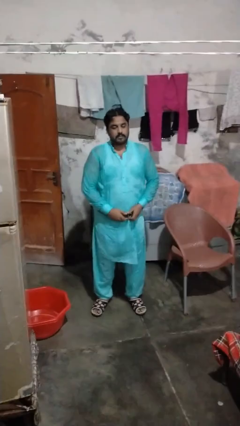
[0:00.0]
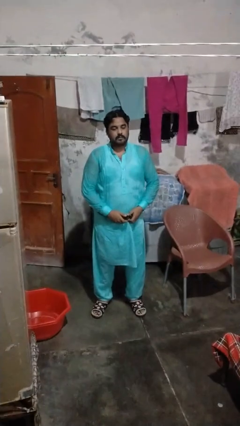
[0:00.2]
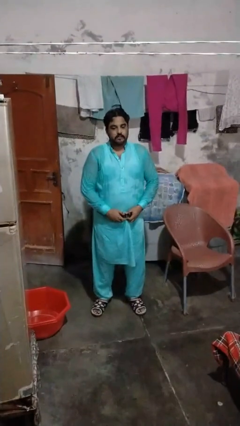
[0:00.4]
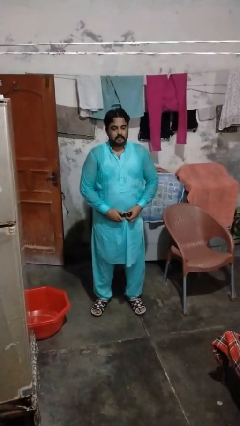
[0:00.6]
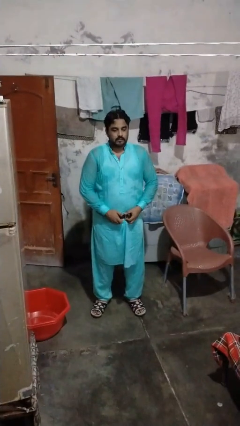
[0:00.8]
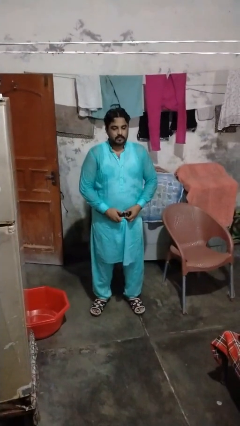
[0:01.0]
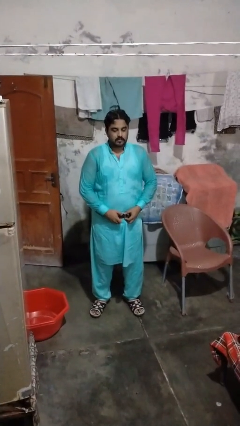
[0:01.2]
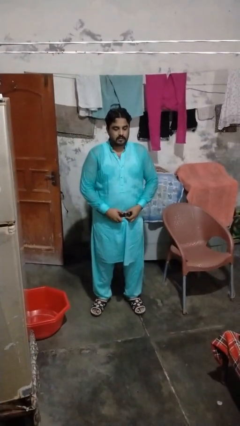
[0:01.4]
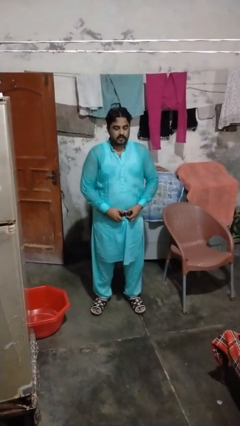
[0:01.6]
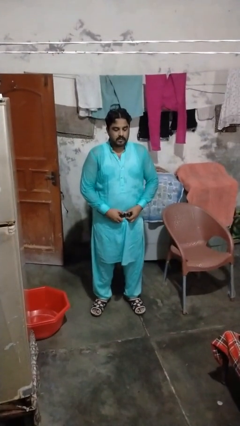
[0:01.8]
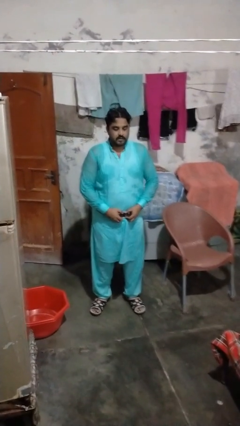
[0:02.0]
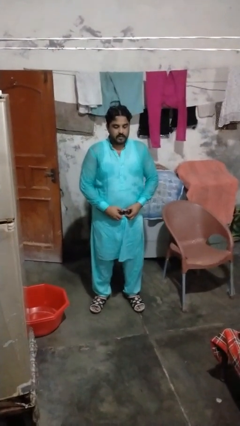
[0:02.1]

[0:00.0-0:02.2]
person puts on belt

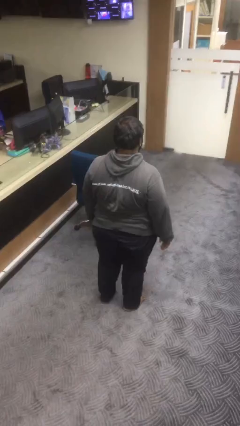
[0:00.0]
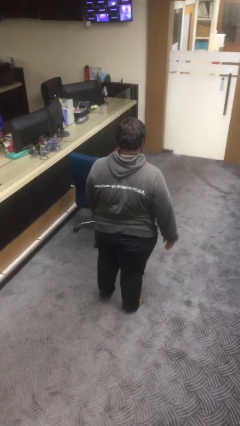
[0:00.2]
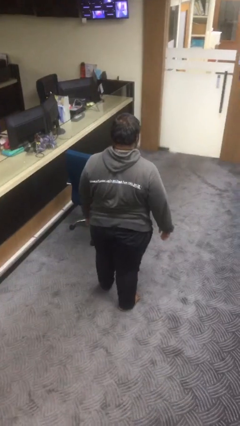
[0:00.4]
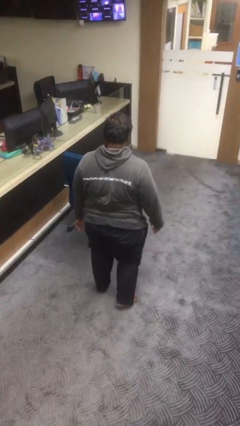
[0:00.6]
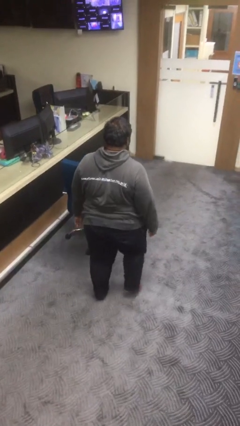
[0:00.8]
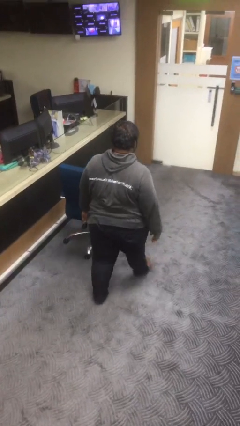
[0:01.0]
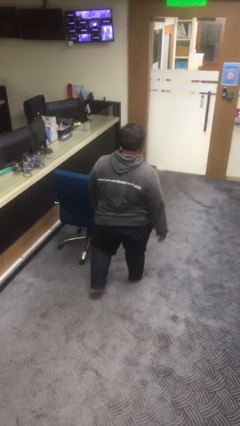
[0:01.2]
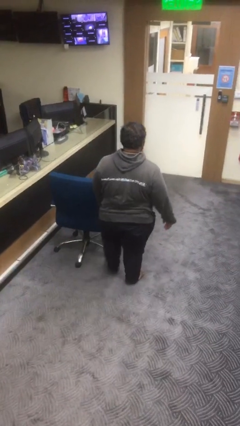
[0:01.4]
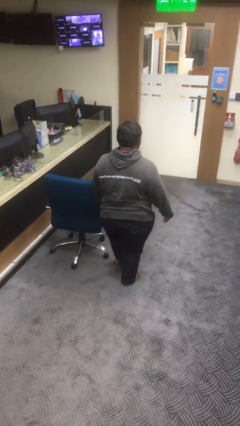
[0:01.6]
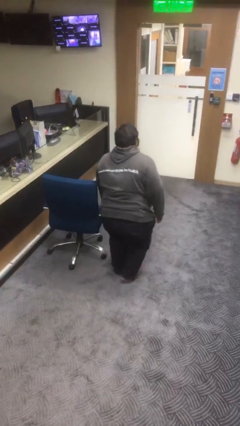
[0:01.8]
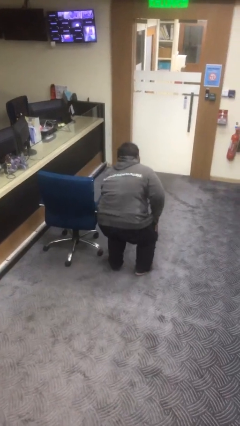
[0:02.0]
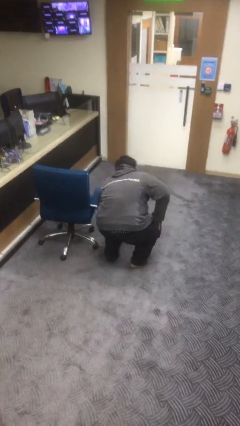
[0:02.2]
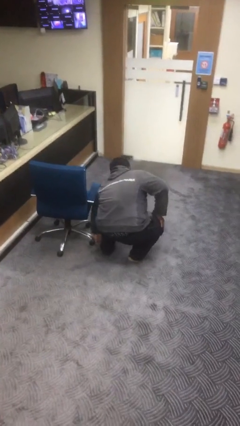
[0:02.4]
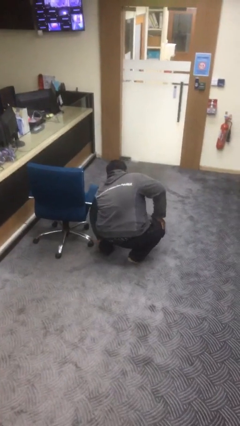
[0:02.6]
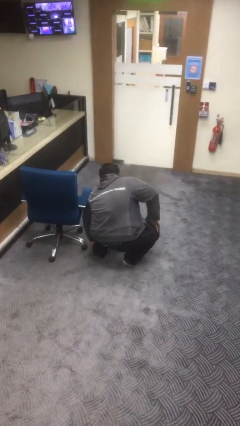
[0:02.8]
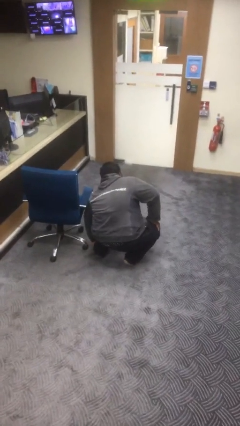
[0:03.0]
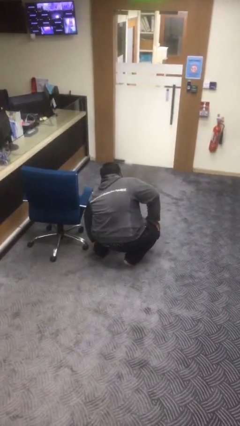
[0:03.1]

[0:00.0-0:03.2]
person stubs toe

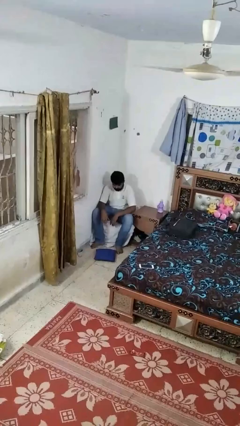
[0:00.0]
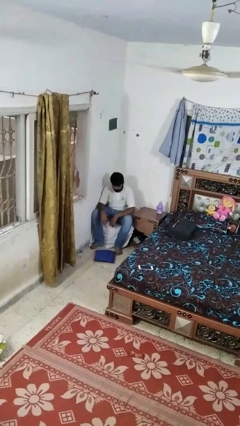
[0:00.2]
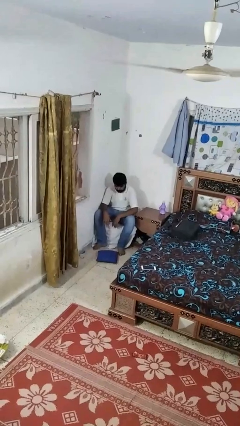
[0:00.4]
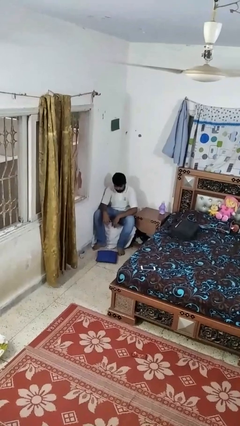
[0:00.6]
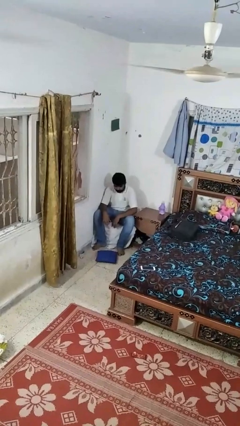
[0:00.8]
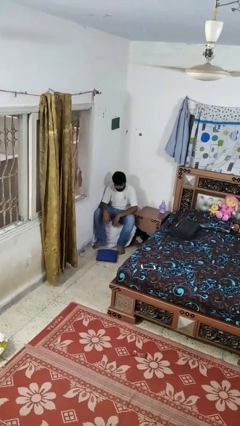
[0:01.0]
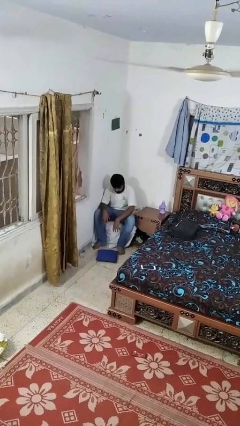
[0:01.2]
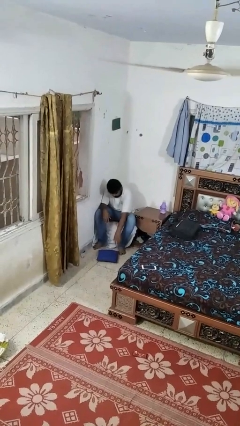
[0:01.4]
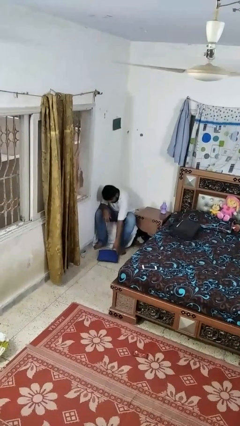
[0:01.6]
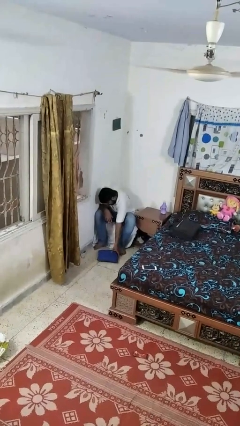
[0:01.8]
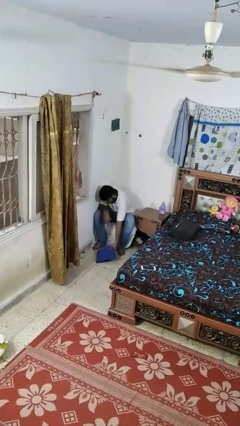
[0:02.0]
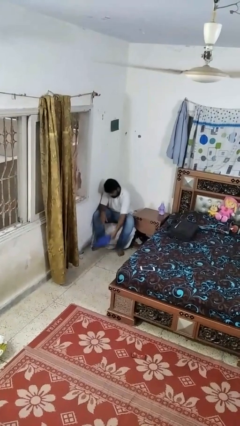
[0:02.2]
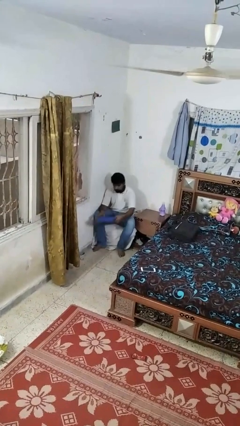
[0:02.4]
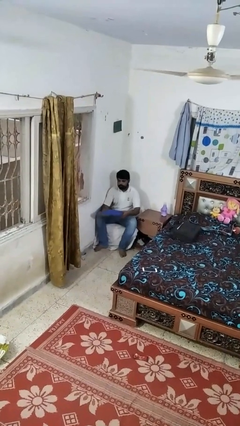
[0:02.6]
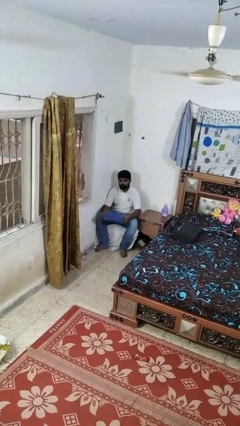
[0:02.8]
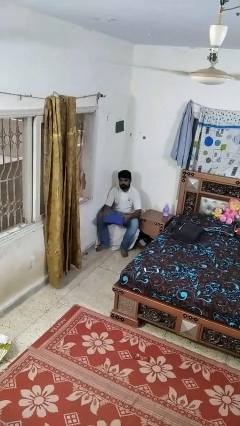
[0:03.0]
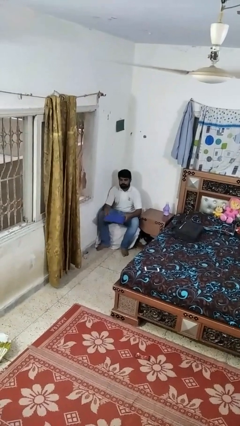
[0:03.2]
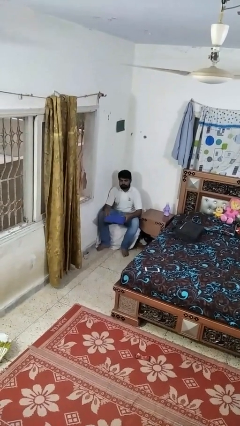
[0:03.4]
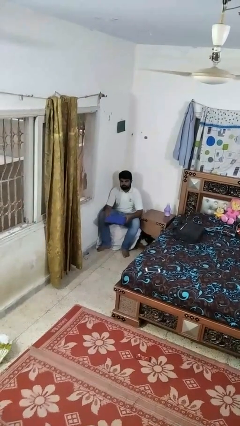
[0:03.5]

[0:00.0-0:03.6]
person picks up object from floor

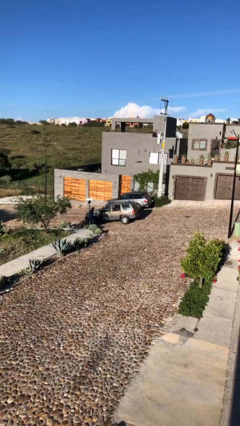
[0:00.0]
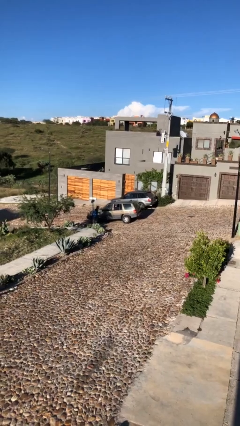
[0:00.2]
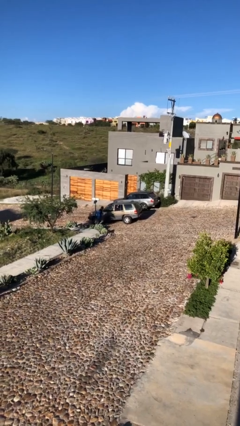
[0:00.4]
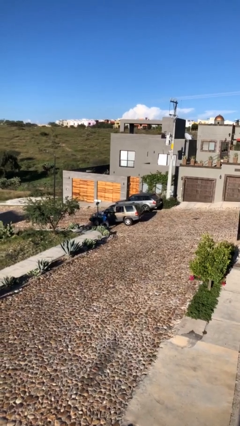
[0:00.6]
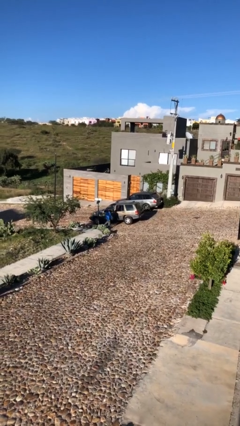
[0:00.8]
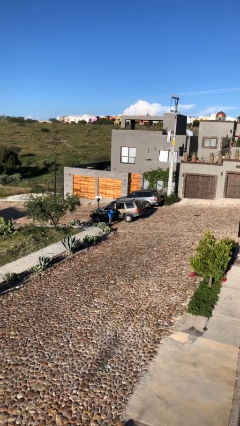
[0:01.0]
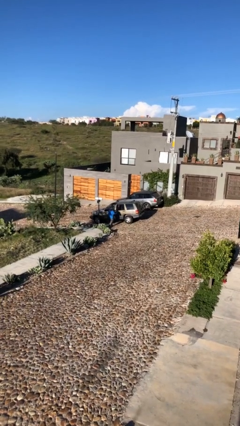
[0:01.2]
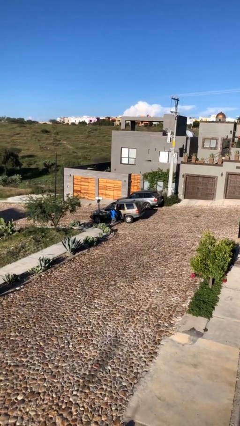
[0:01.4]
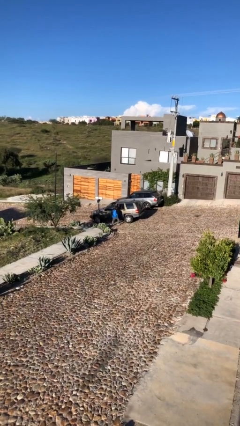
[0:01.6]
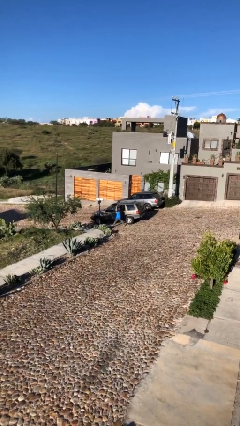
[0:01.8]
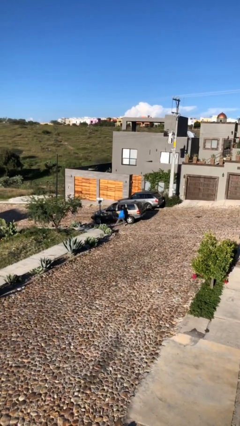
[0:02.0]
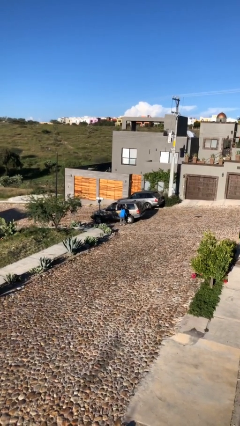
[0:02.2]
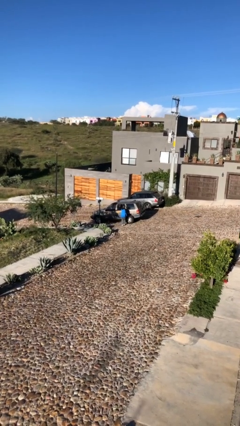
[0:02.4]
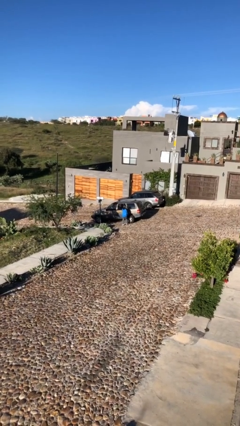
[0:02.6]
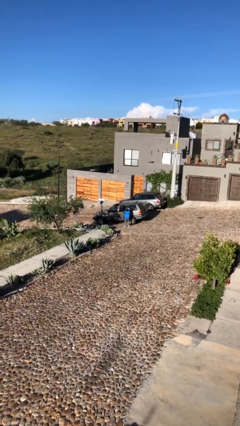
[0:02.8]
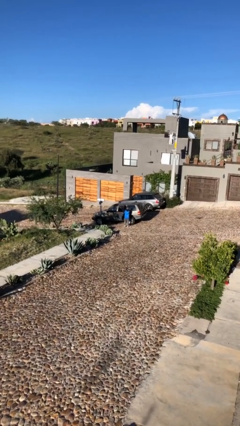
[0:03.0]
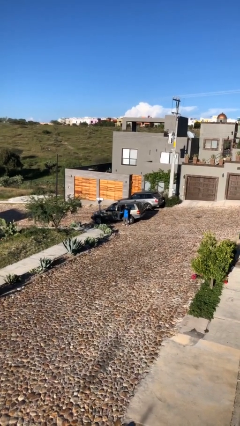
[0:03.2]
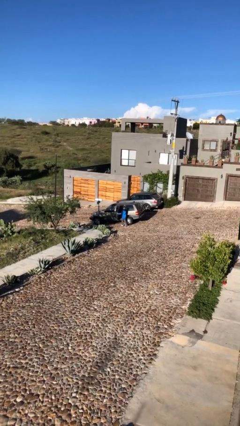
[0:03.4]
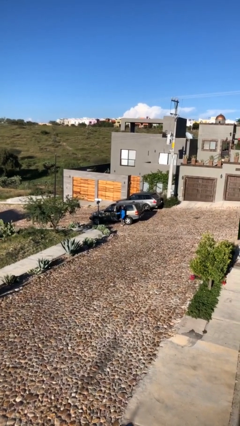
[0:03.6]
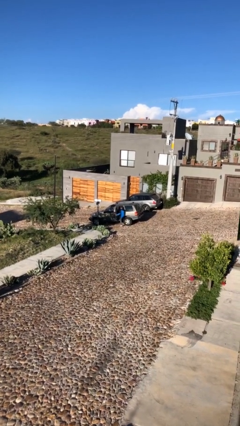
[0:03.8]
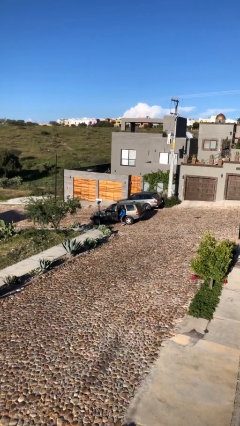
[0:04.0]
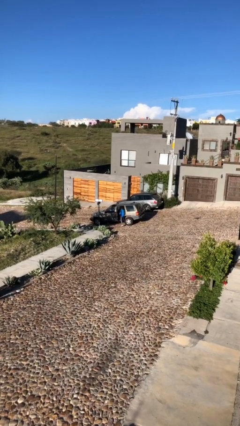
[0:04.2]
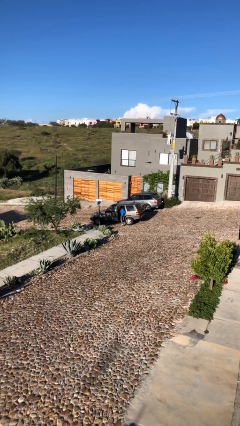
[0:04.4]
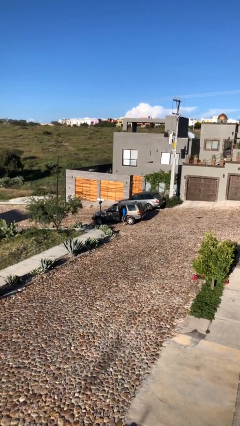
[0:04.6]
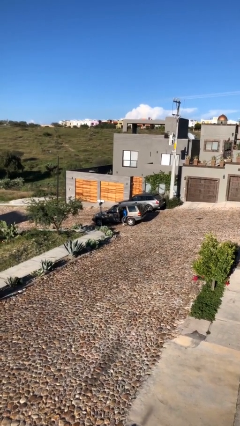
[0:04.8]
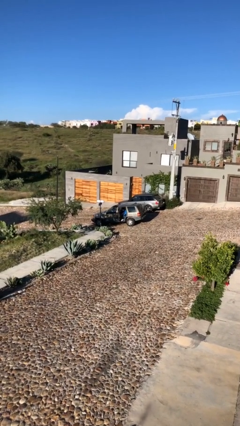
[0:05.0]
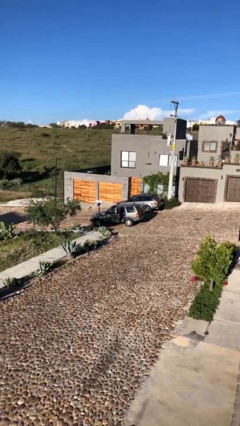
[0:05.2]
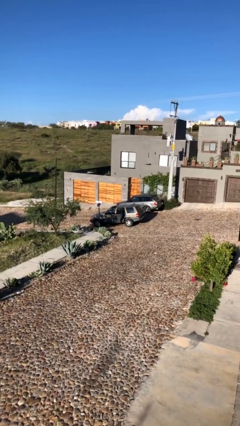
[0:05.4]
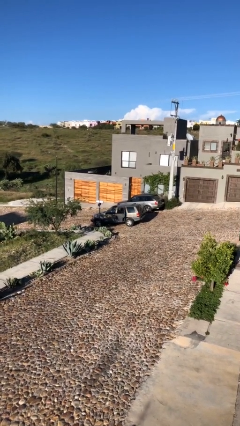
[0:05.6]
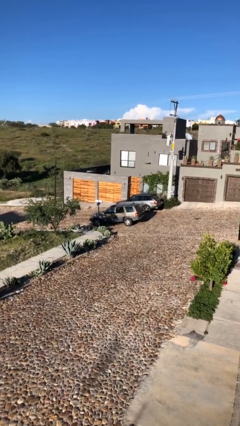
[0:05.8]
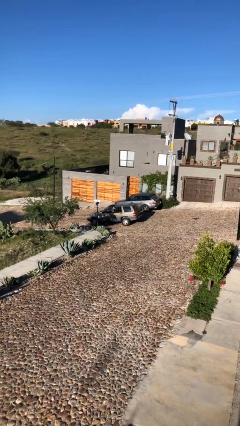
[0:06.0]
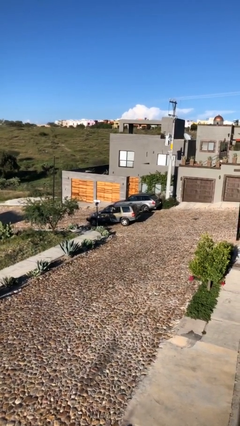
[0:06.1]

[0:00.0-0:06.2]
car picks up person

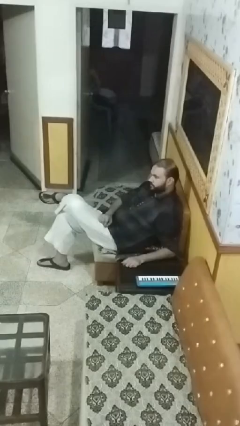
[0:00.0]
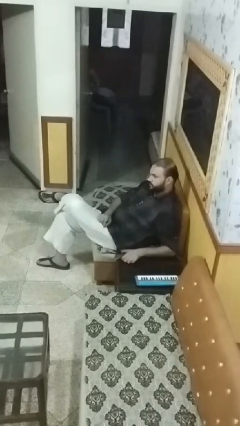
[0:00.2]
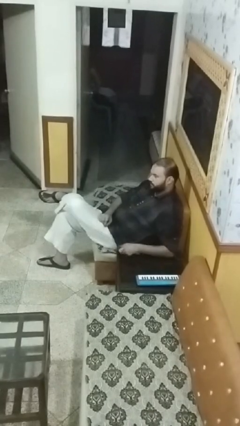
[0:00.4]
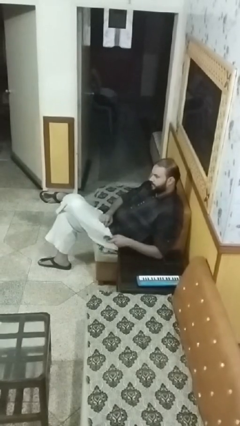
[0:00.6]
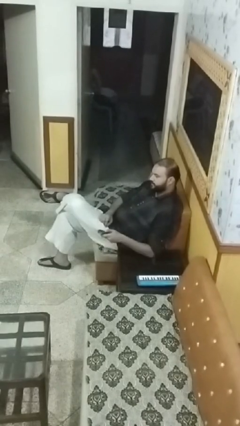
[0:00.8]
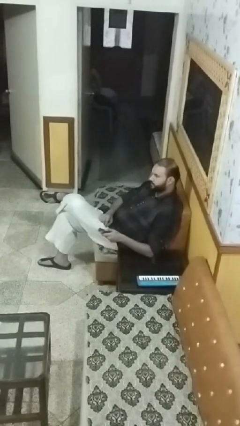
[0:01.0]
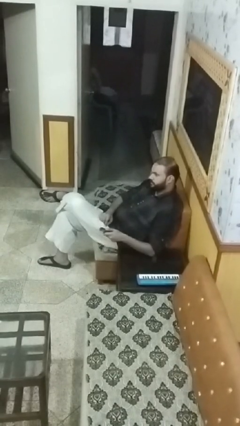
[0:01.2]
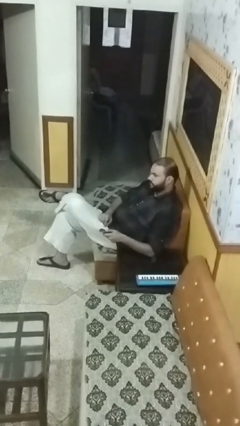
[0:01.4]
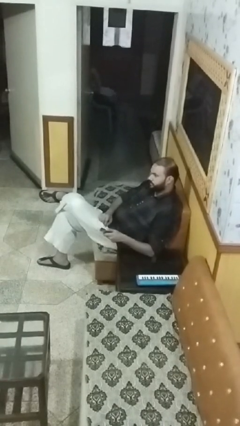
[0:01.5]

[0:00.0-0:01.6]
person uses television remote

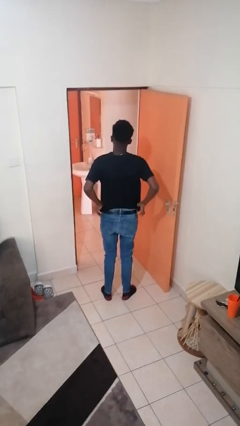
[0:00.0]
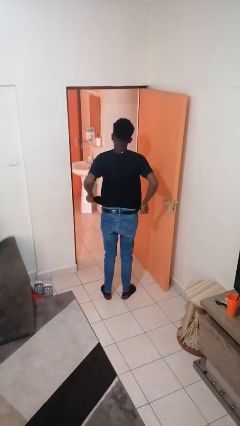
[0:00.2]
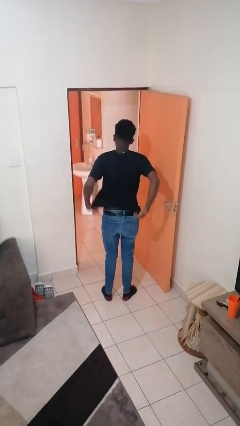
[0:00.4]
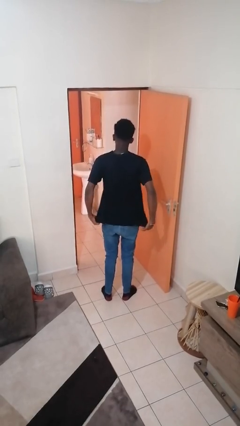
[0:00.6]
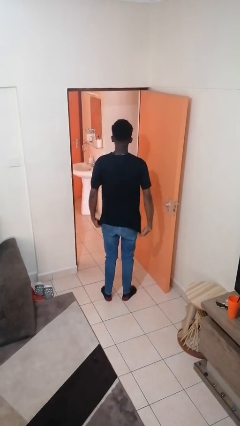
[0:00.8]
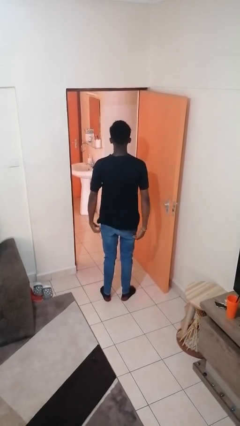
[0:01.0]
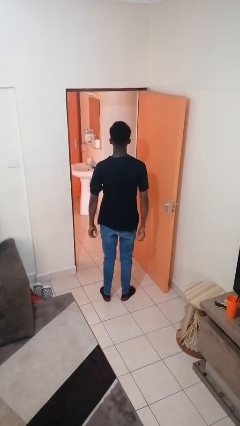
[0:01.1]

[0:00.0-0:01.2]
person untucks shirt
